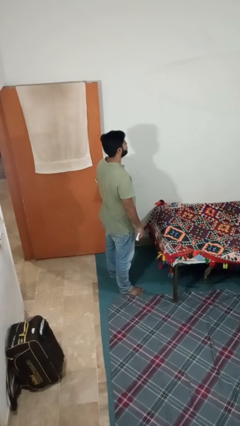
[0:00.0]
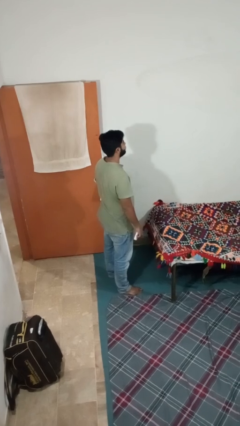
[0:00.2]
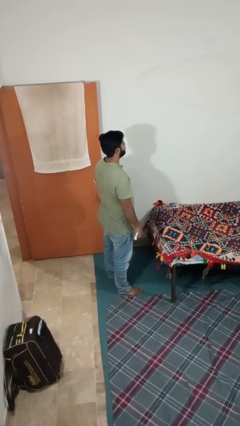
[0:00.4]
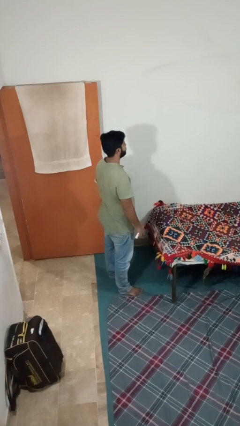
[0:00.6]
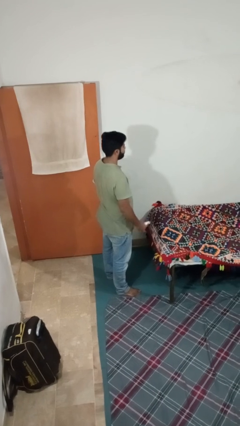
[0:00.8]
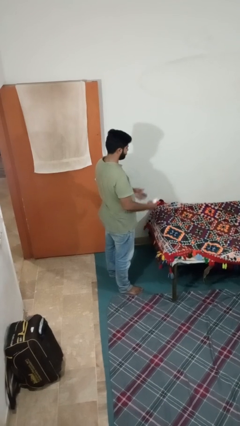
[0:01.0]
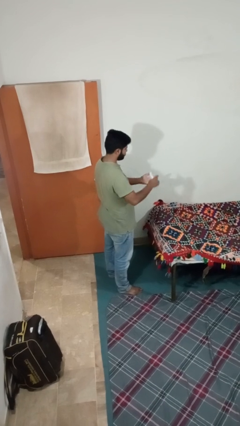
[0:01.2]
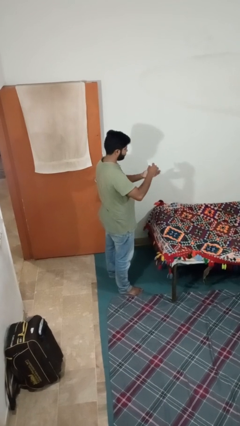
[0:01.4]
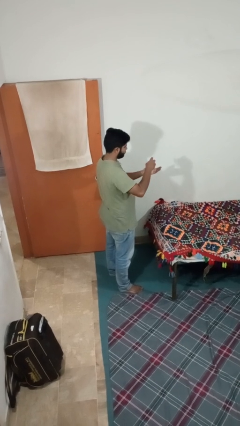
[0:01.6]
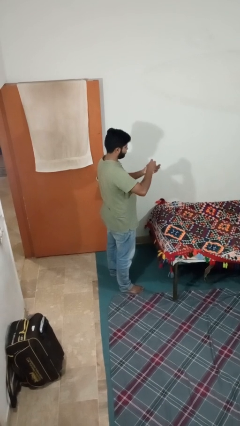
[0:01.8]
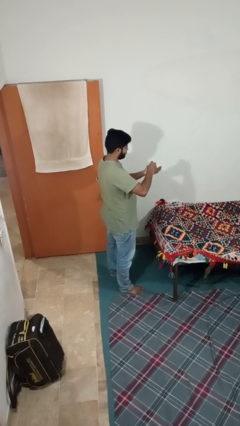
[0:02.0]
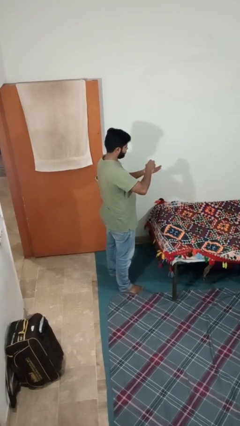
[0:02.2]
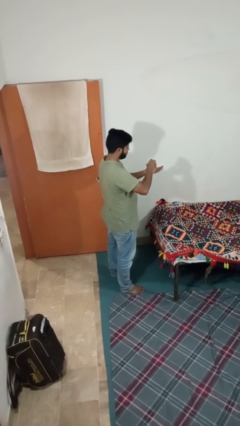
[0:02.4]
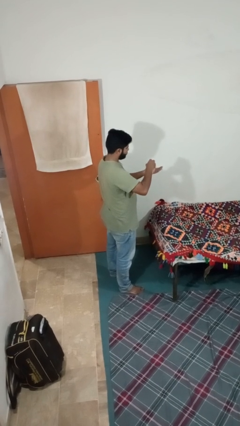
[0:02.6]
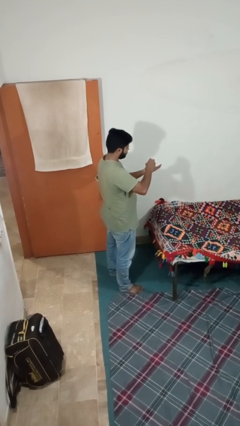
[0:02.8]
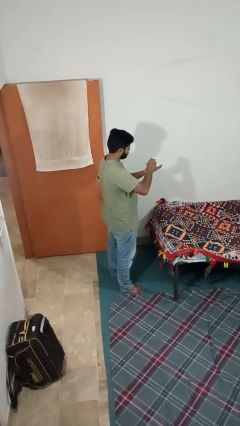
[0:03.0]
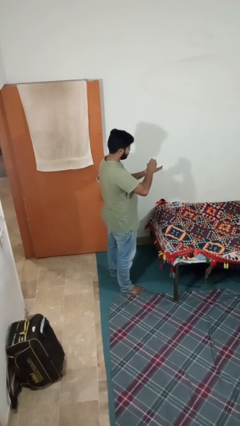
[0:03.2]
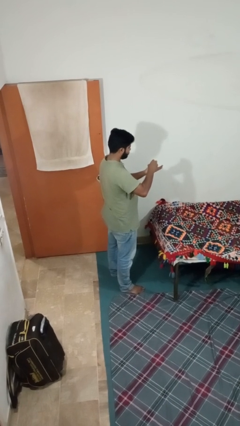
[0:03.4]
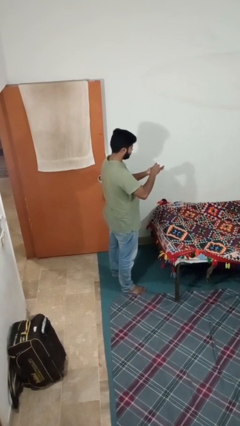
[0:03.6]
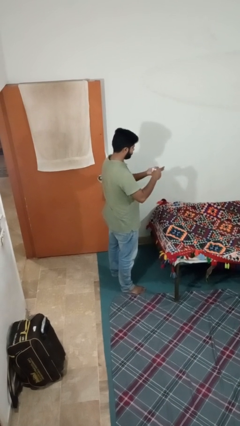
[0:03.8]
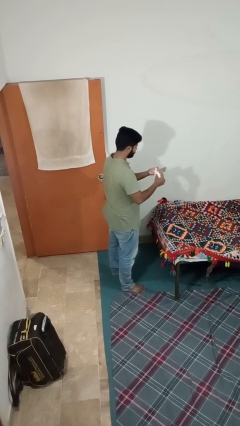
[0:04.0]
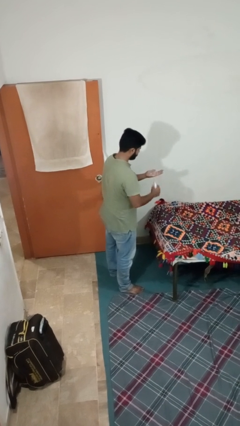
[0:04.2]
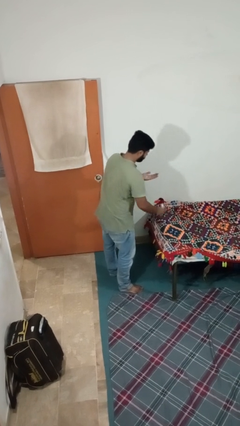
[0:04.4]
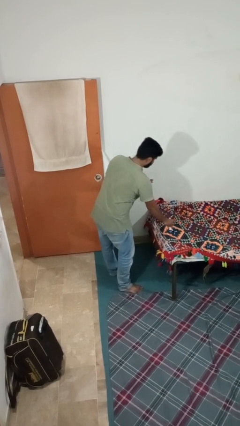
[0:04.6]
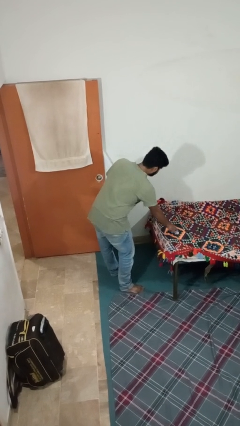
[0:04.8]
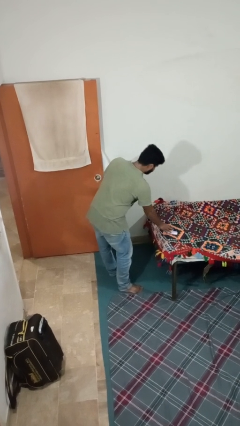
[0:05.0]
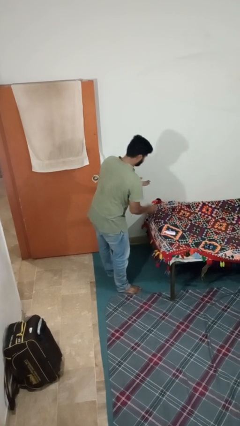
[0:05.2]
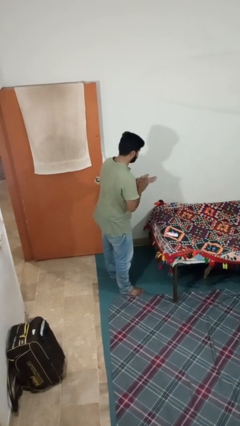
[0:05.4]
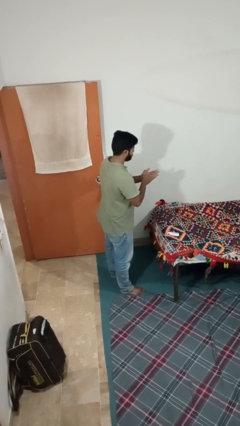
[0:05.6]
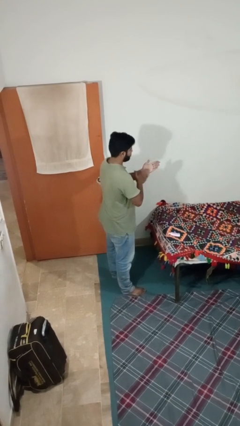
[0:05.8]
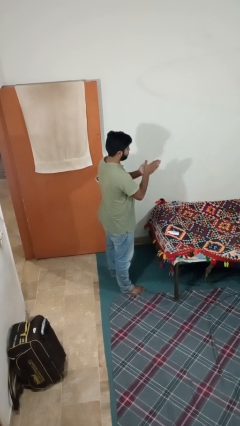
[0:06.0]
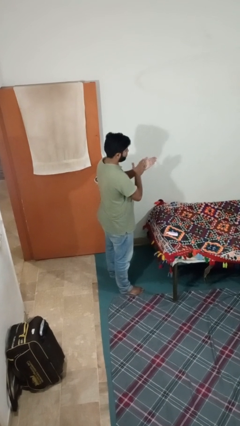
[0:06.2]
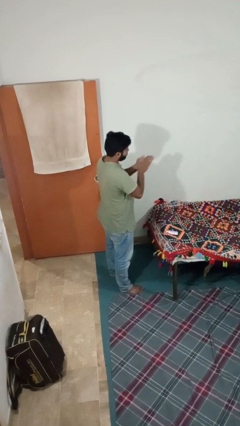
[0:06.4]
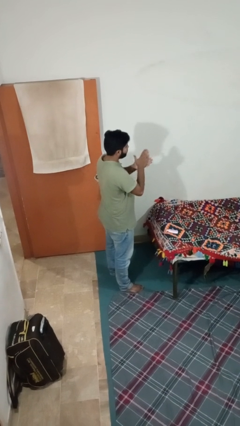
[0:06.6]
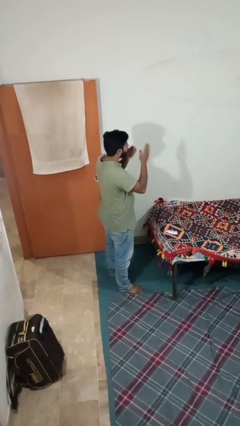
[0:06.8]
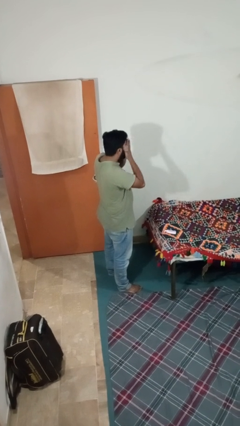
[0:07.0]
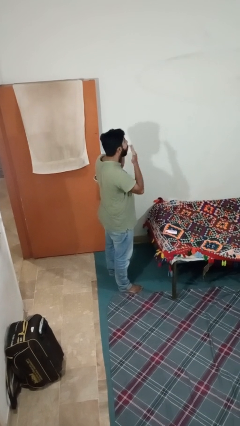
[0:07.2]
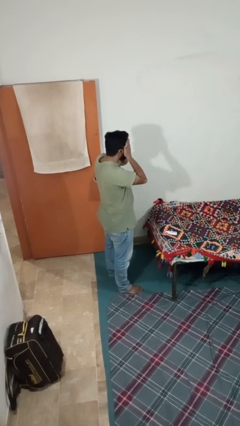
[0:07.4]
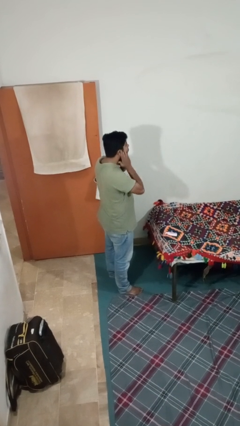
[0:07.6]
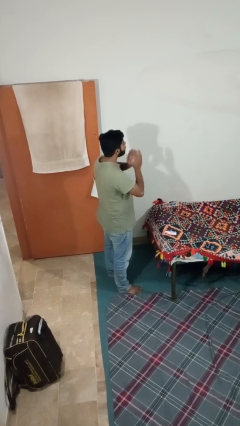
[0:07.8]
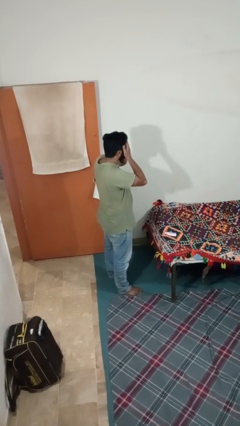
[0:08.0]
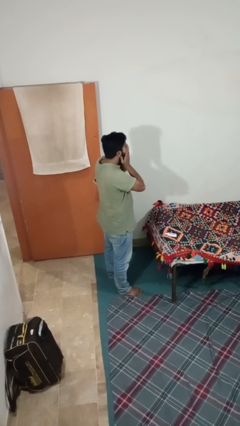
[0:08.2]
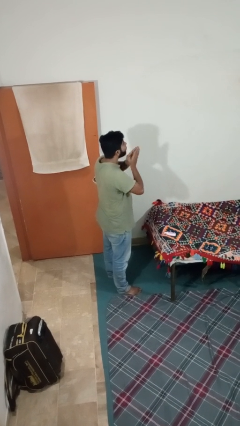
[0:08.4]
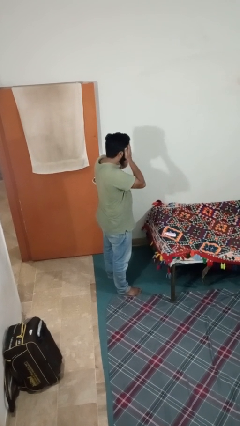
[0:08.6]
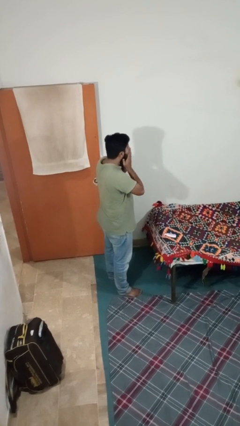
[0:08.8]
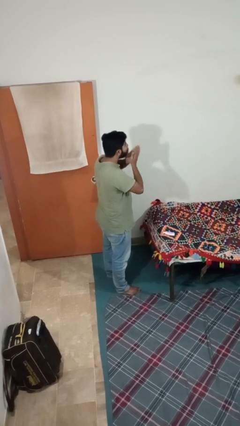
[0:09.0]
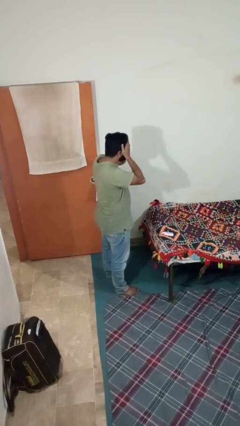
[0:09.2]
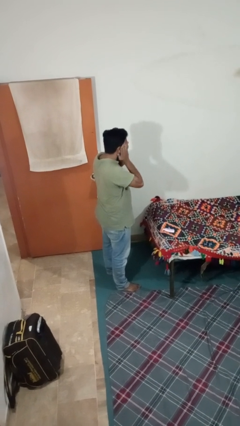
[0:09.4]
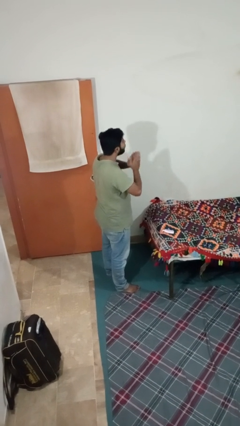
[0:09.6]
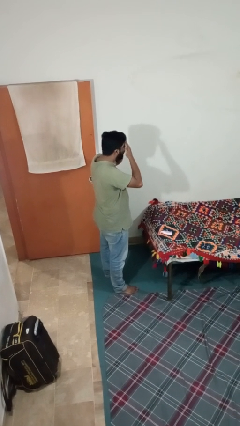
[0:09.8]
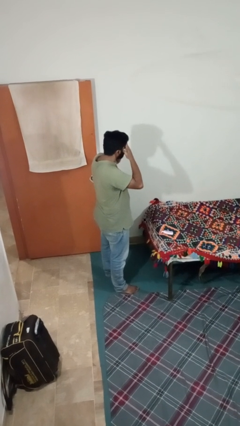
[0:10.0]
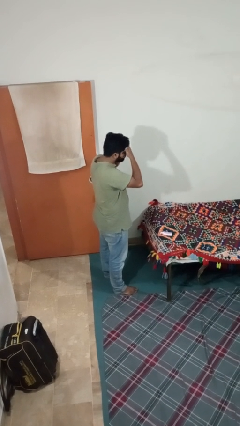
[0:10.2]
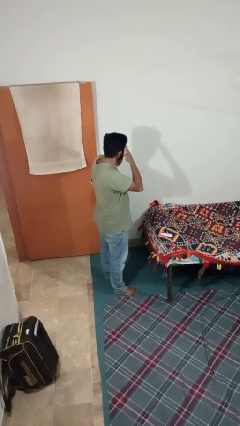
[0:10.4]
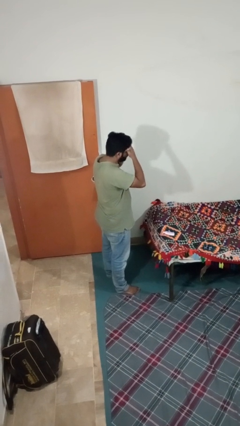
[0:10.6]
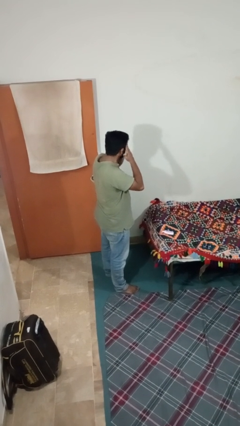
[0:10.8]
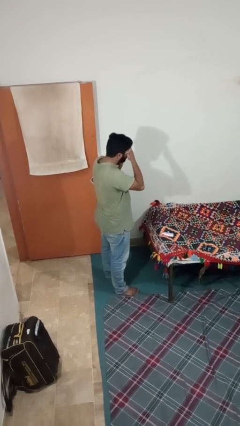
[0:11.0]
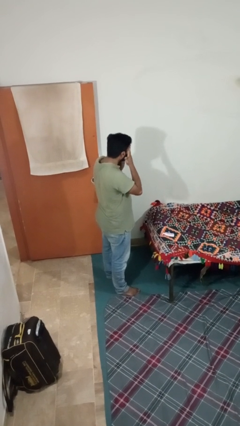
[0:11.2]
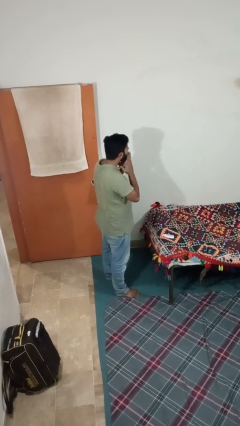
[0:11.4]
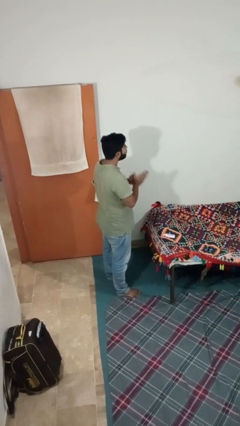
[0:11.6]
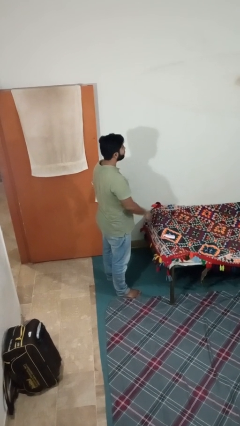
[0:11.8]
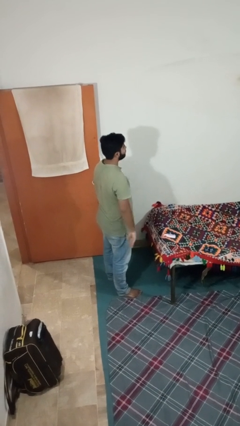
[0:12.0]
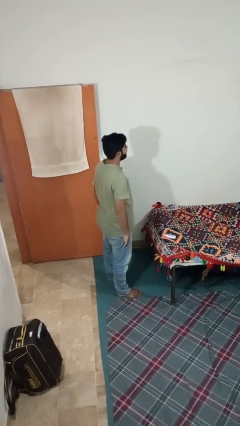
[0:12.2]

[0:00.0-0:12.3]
person applies facial moisturizer

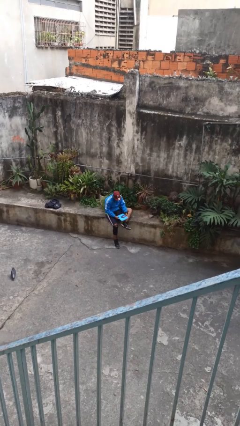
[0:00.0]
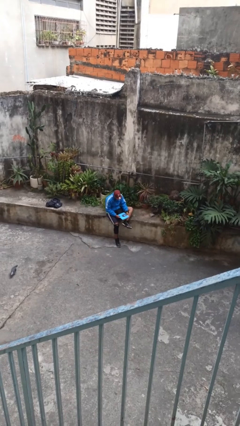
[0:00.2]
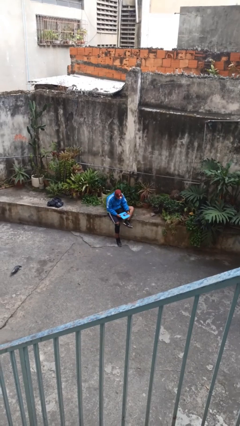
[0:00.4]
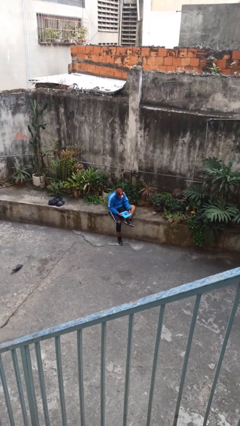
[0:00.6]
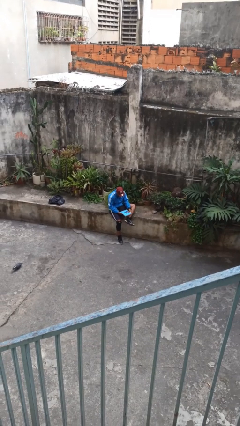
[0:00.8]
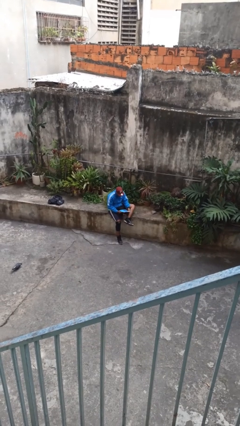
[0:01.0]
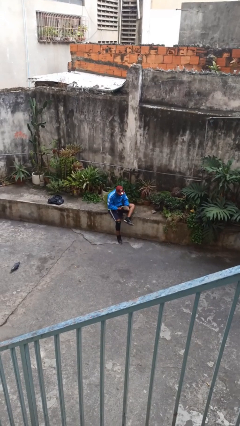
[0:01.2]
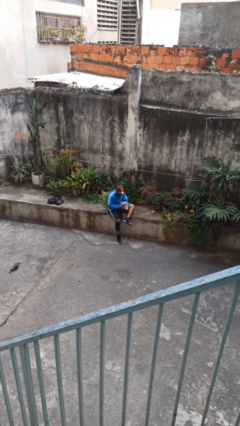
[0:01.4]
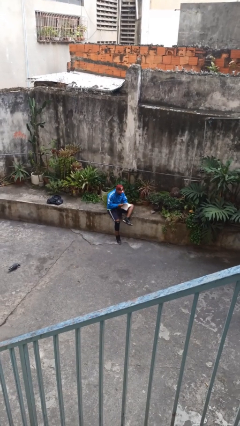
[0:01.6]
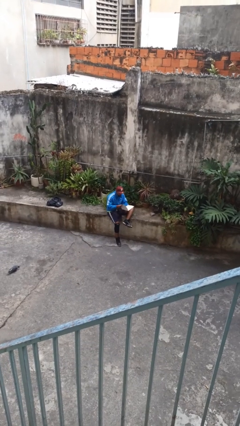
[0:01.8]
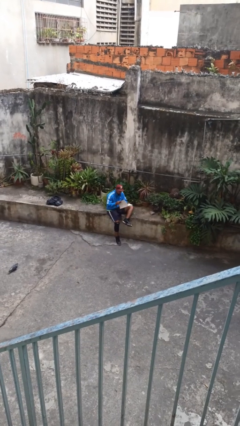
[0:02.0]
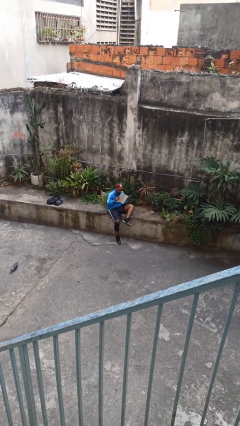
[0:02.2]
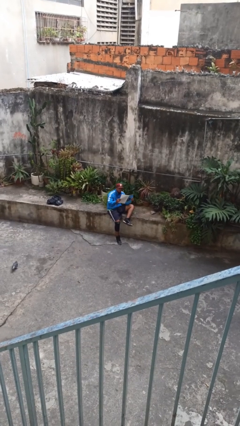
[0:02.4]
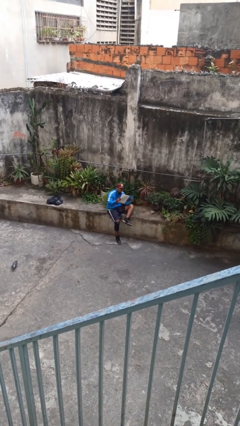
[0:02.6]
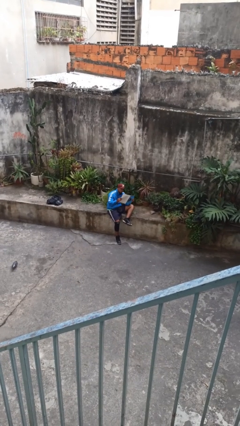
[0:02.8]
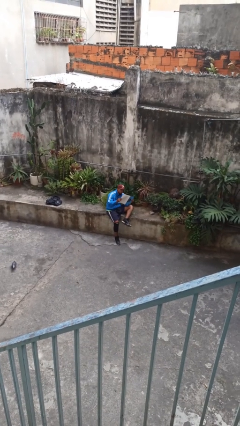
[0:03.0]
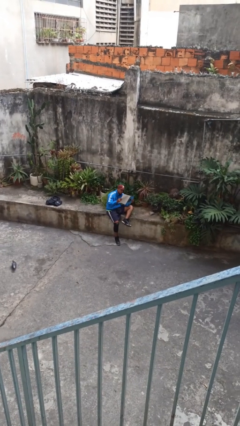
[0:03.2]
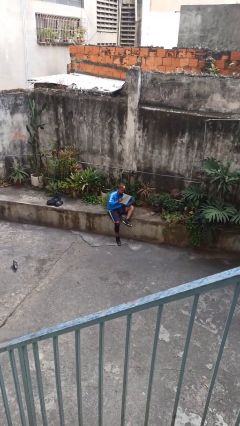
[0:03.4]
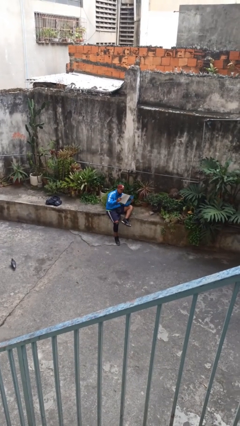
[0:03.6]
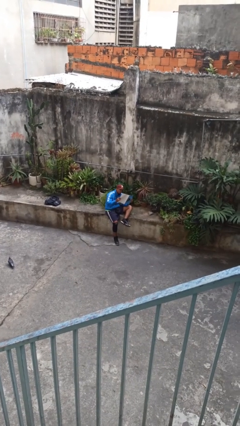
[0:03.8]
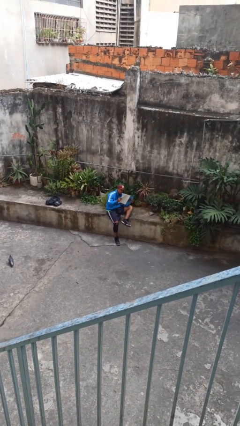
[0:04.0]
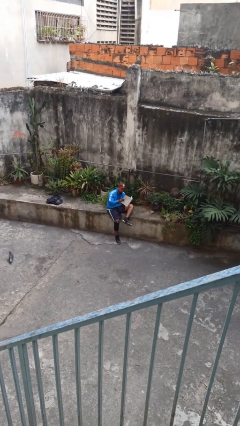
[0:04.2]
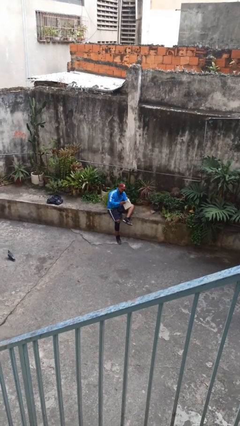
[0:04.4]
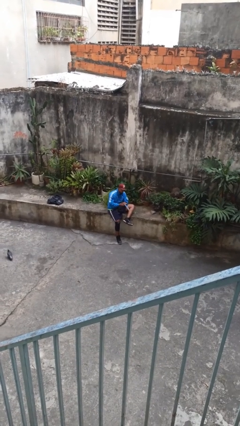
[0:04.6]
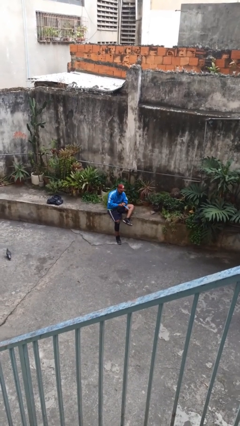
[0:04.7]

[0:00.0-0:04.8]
person reads document

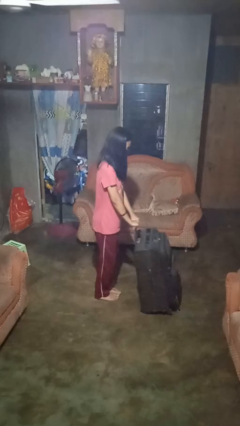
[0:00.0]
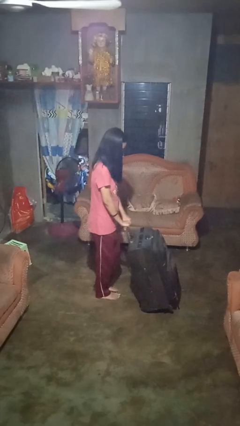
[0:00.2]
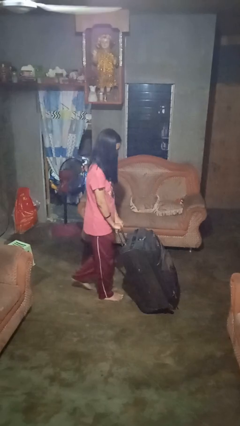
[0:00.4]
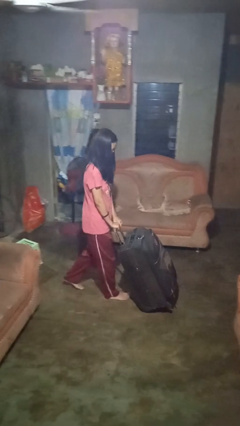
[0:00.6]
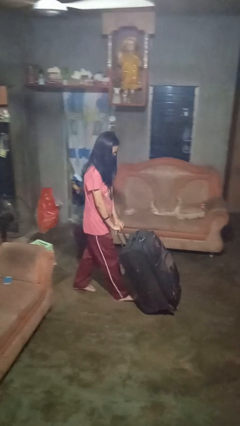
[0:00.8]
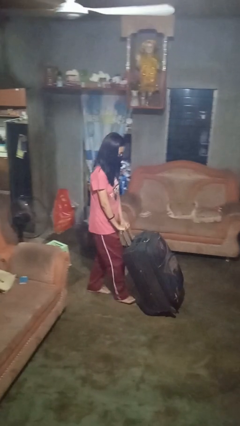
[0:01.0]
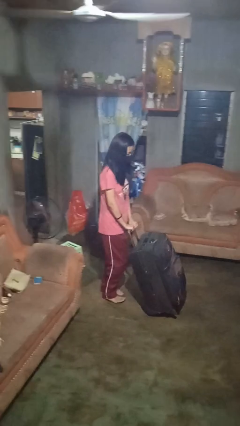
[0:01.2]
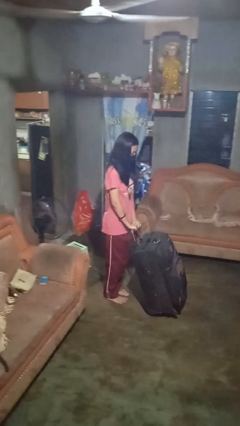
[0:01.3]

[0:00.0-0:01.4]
person pulls wheeled cart
